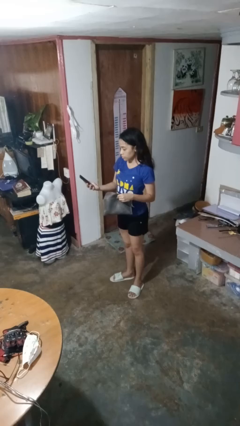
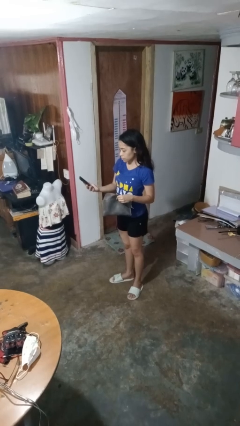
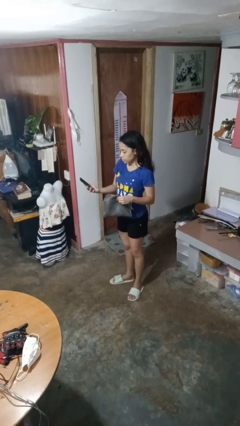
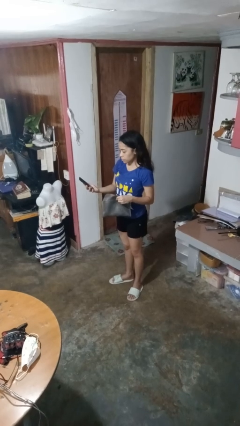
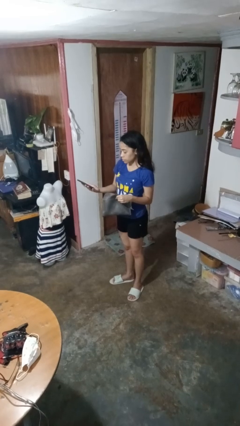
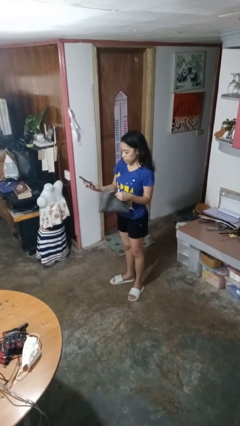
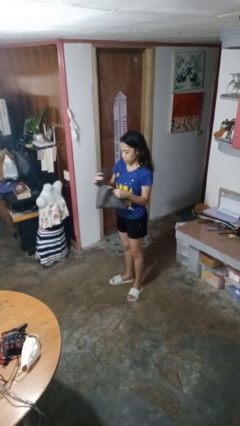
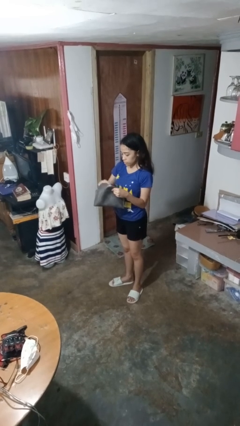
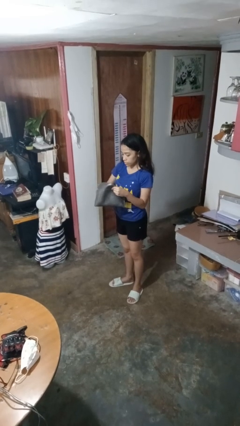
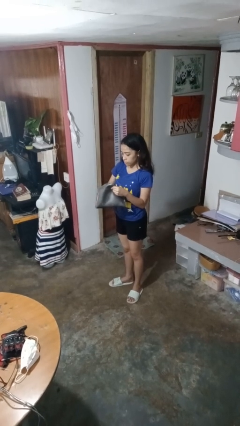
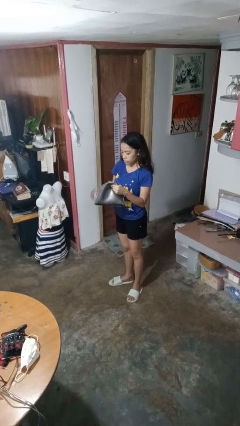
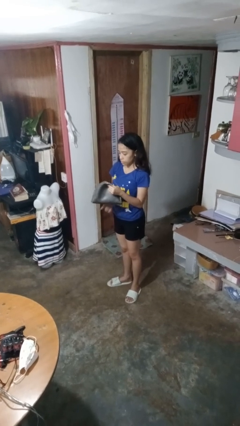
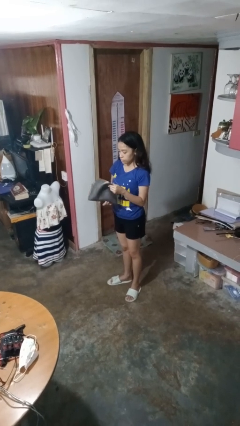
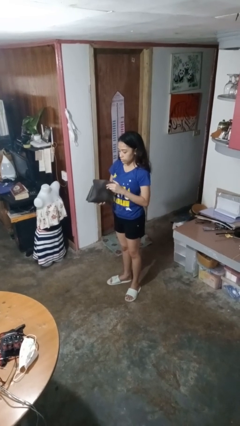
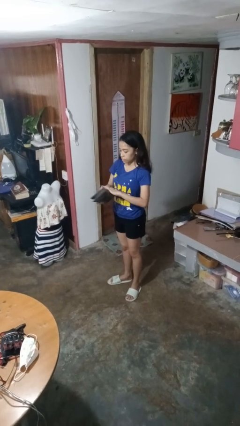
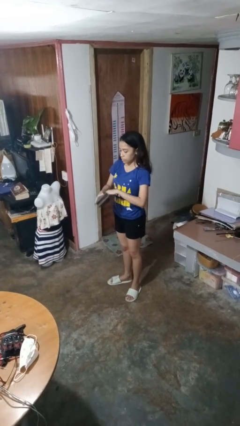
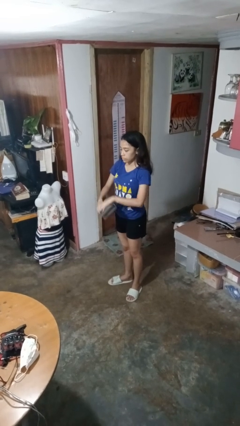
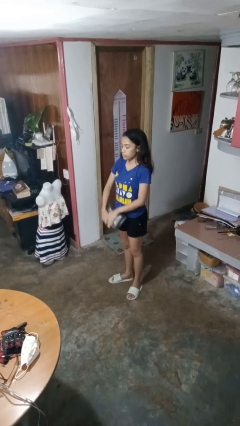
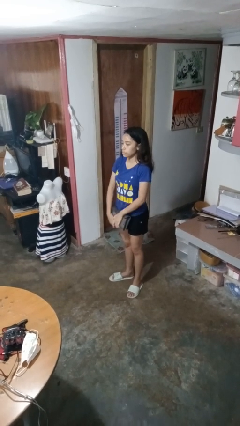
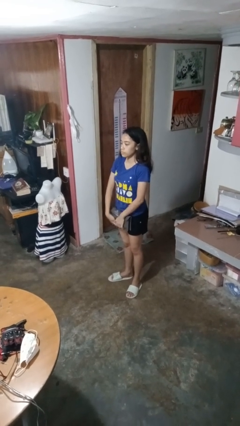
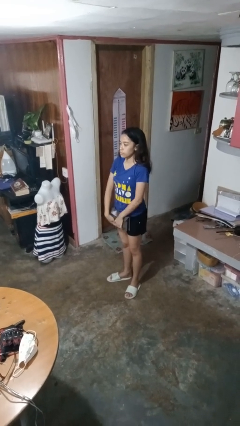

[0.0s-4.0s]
person puts object into purse

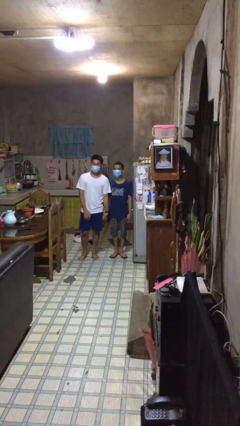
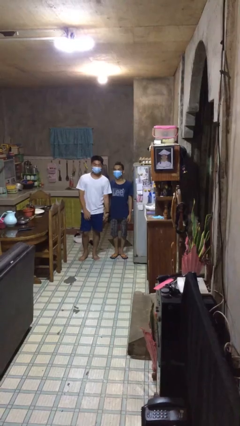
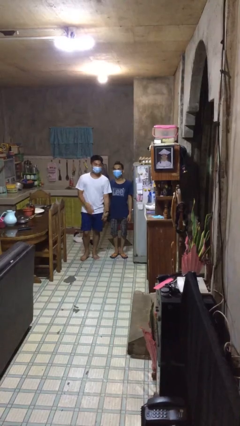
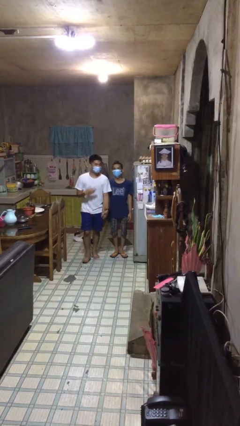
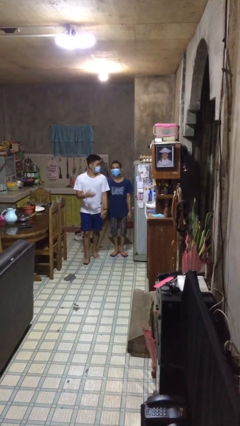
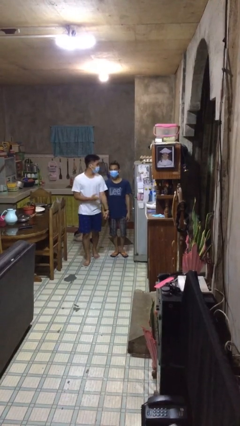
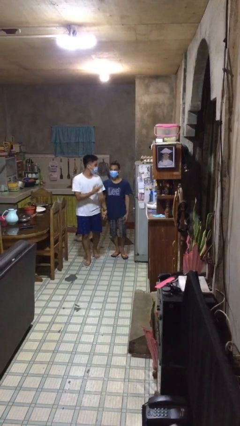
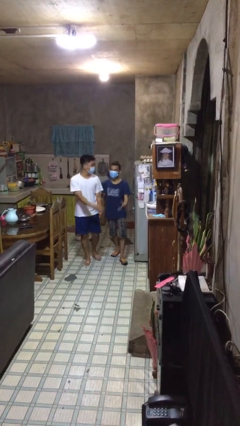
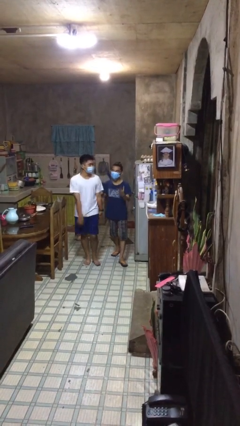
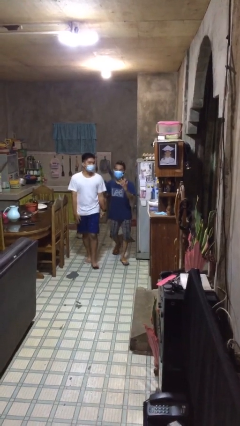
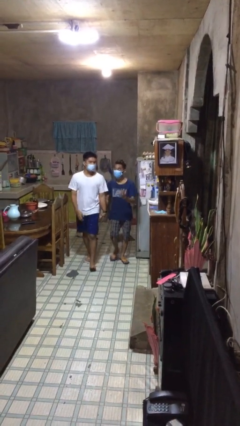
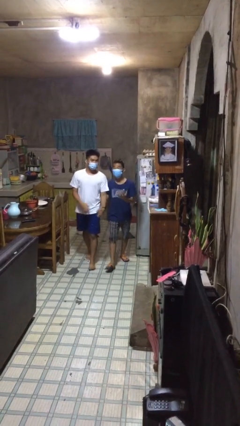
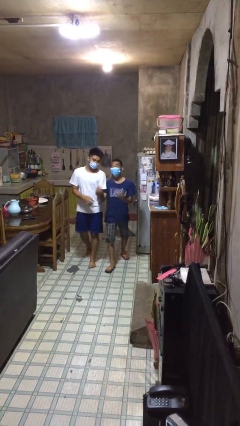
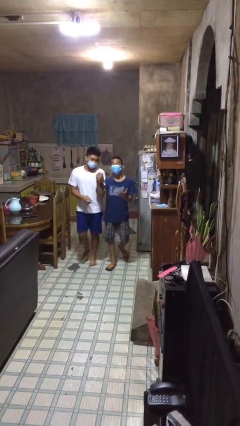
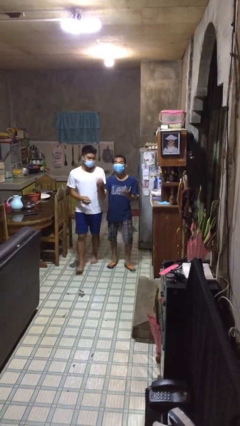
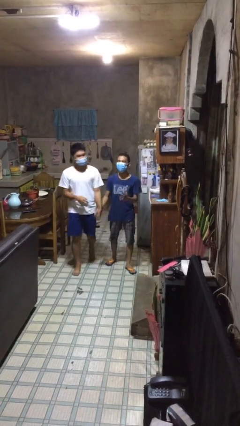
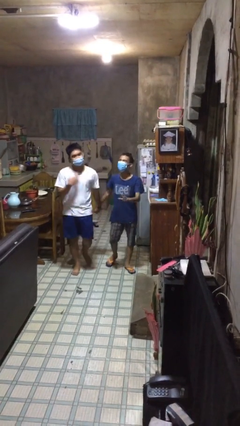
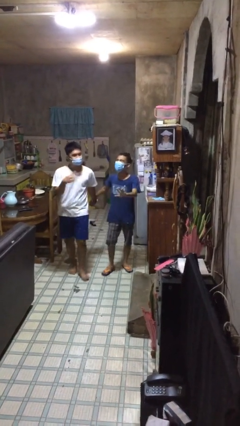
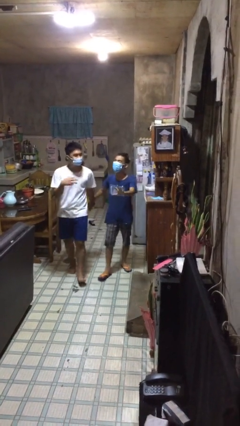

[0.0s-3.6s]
person holds hand

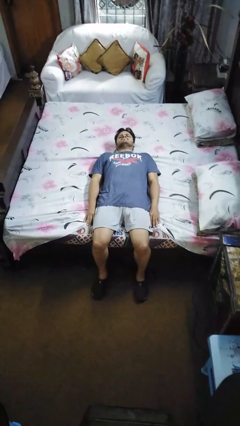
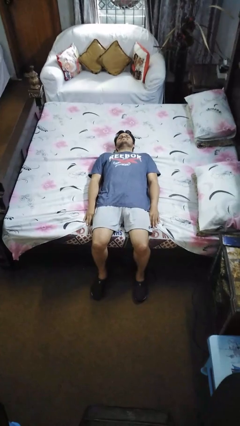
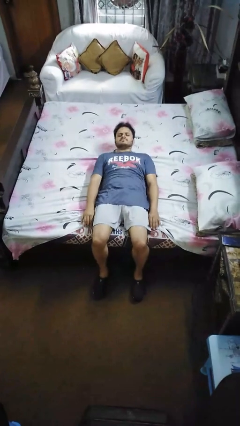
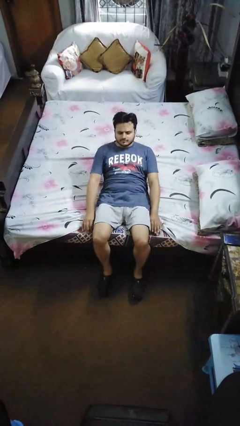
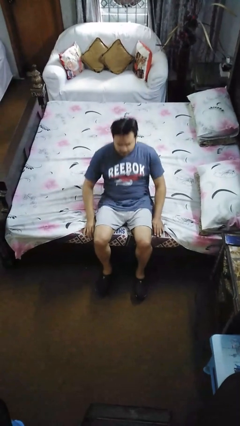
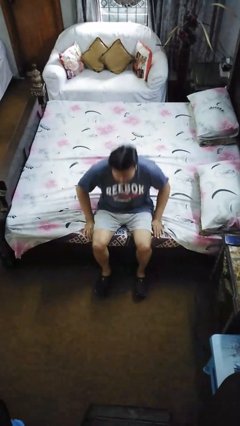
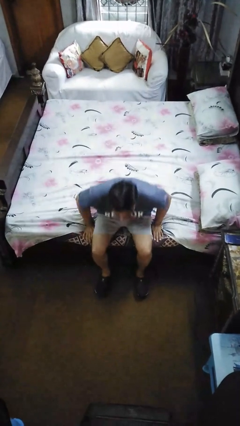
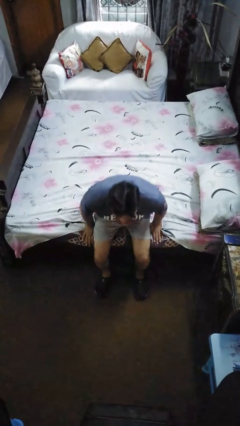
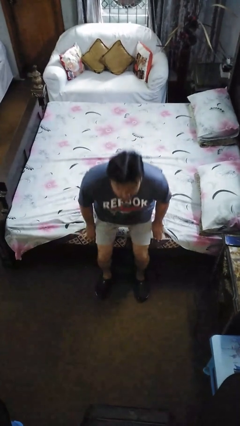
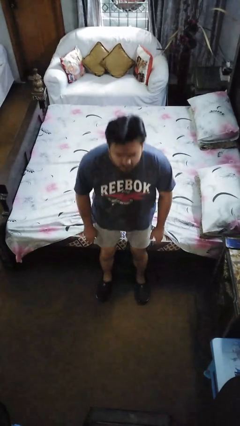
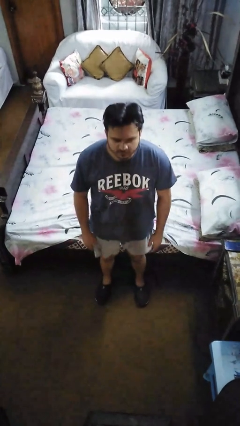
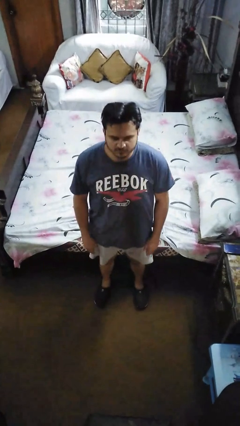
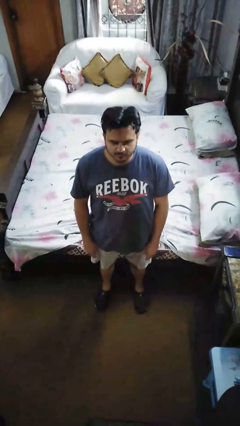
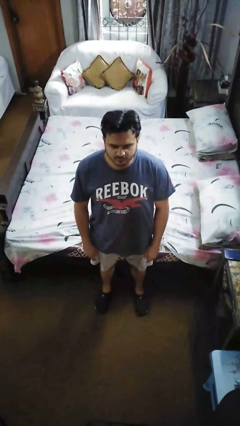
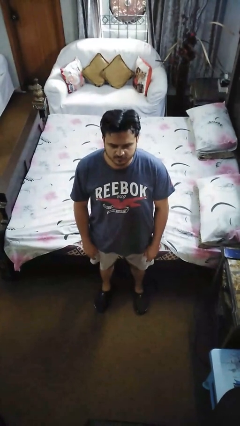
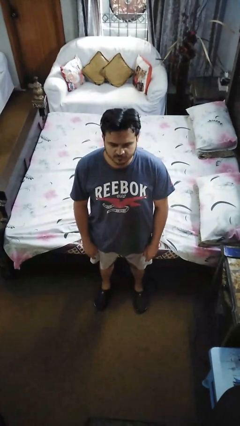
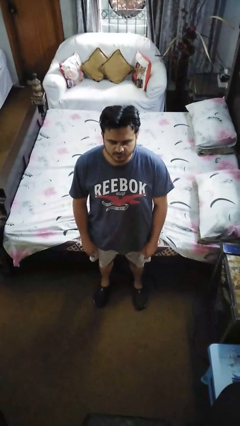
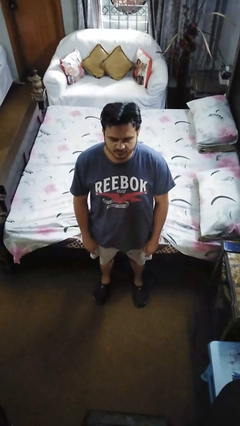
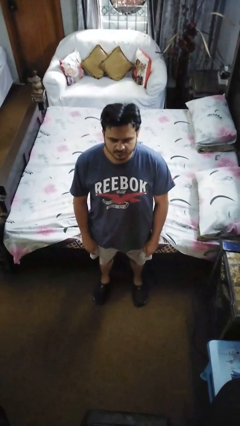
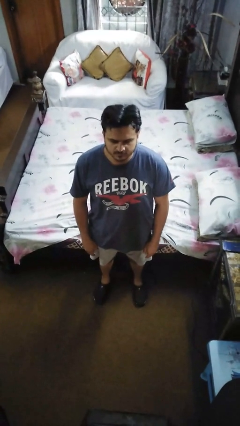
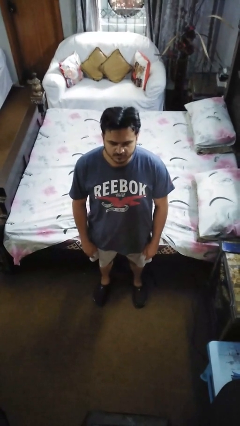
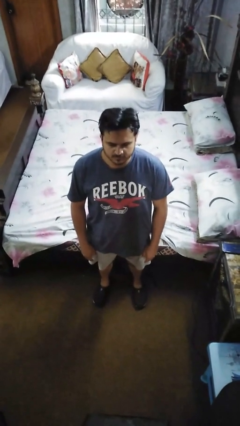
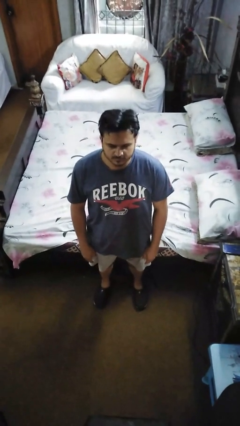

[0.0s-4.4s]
person stands up

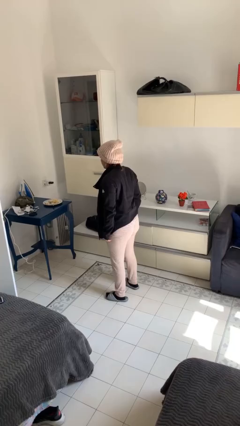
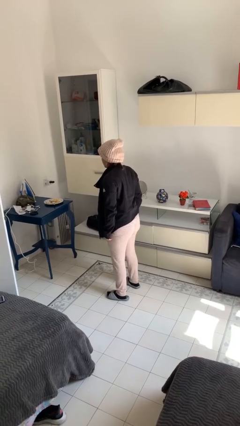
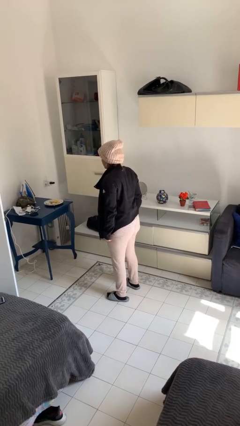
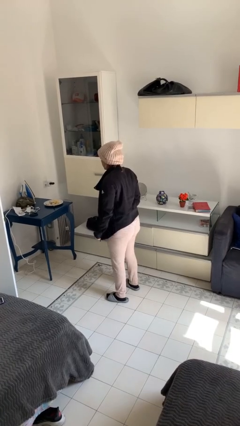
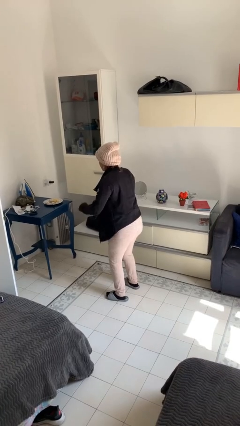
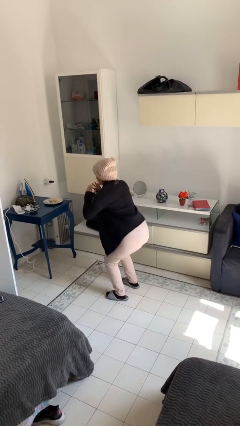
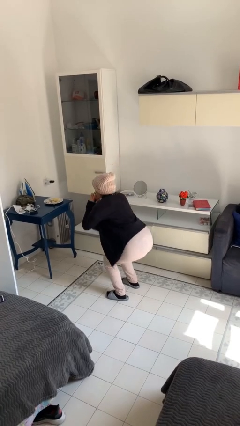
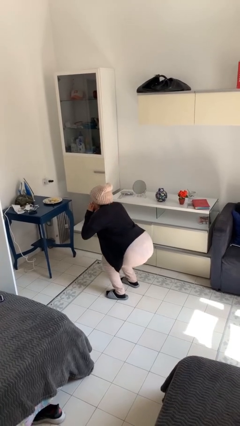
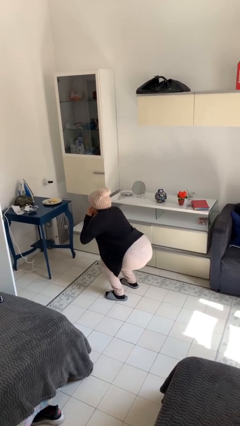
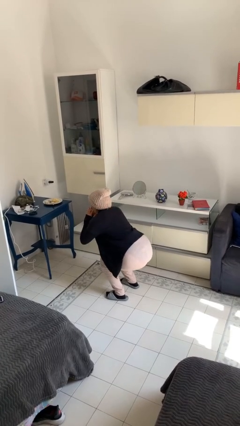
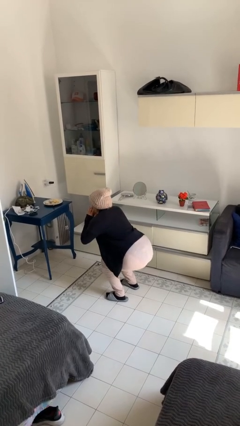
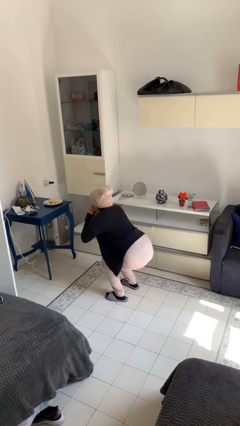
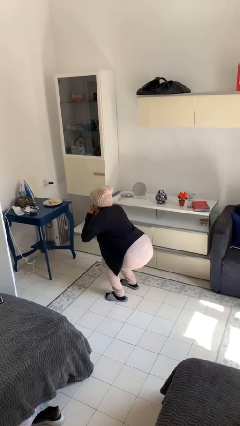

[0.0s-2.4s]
person squats

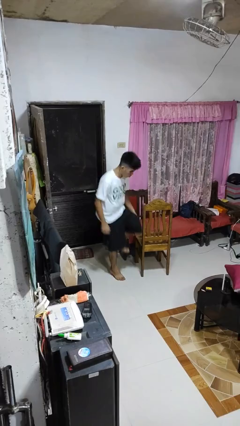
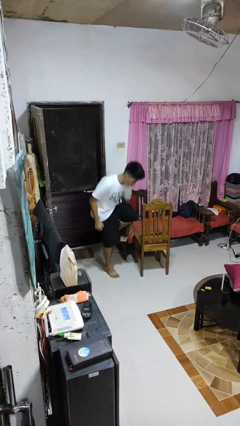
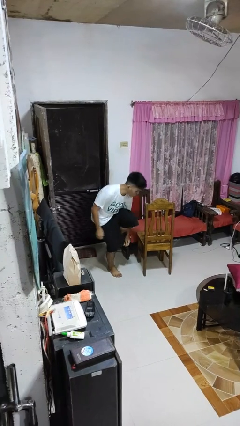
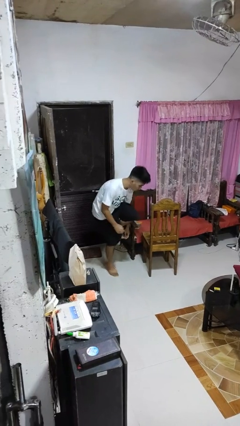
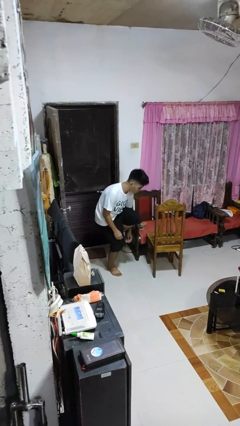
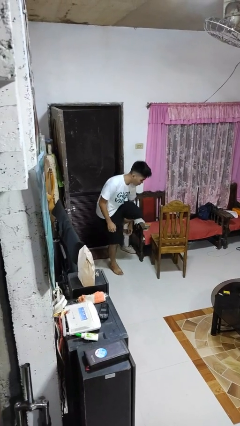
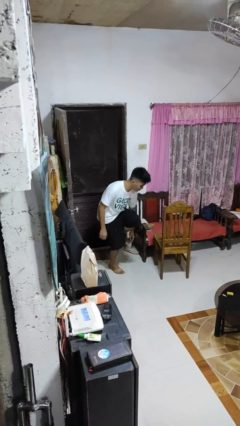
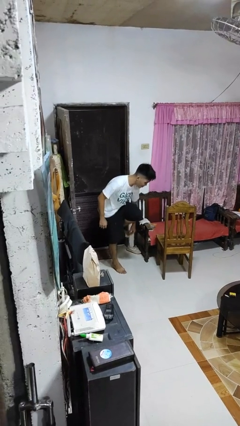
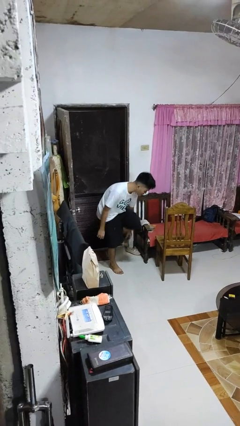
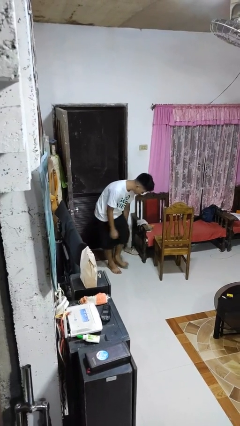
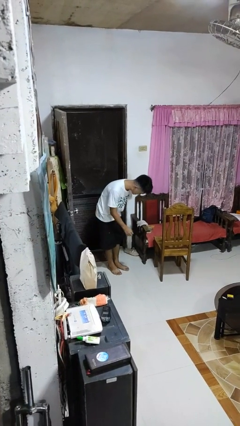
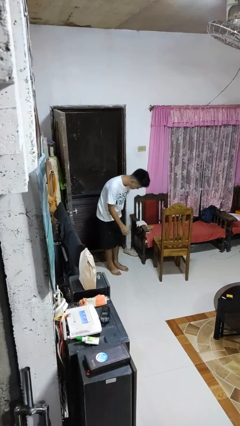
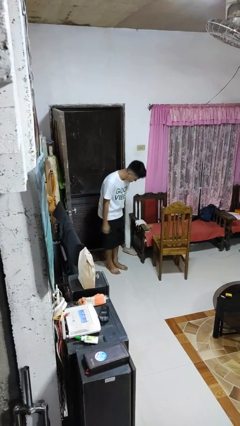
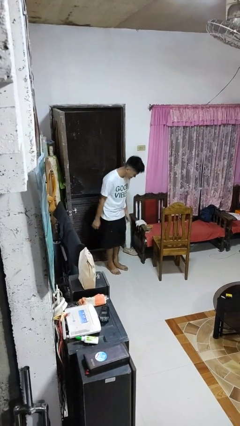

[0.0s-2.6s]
person stubs toe

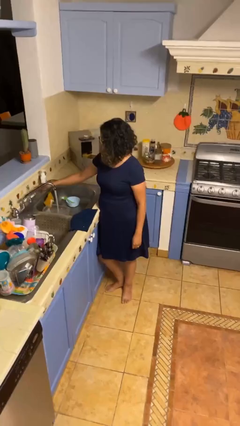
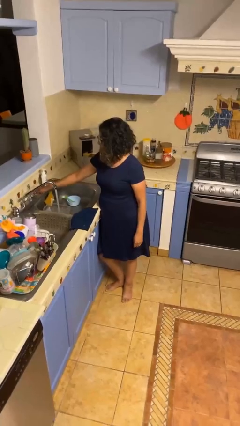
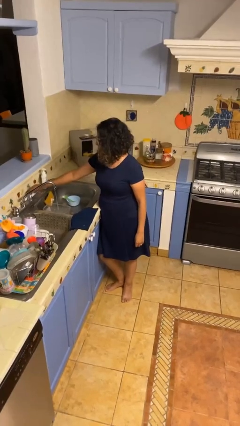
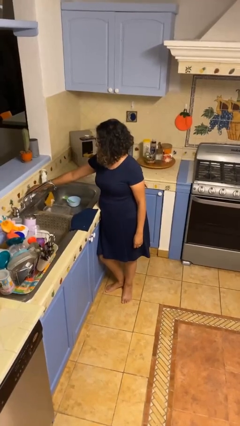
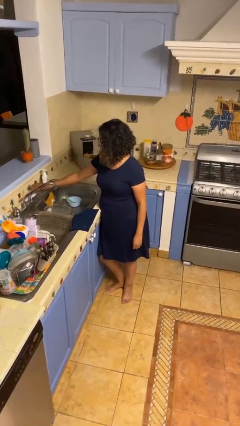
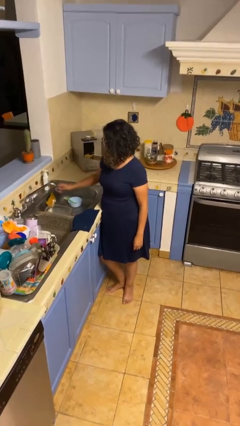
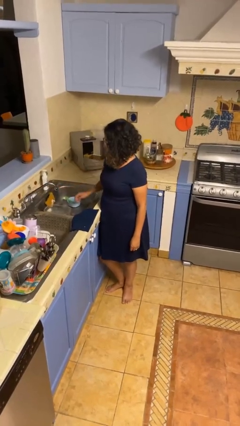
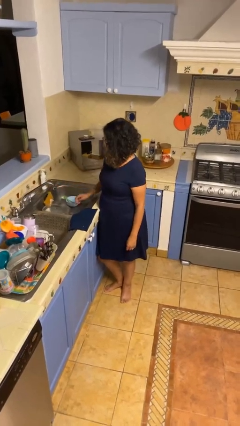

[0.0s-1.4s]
person turns off faucet
